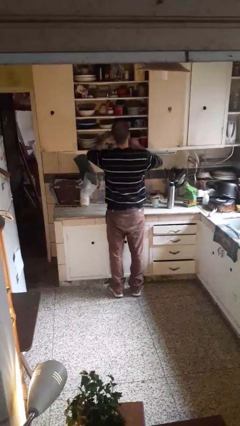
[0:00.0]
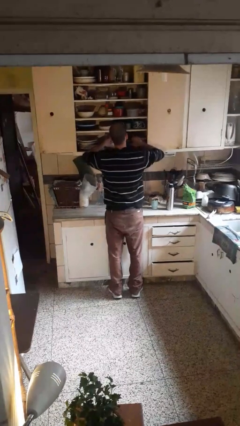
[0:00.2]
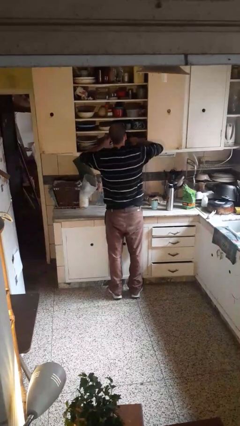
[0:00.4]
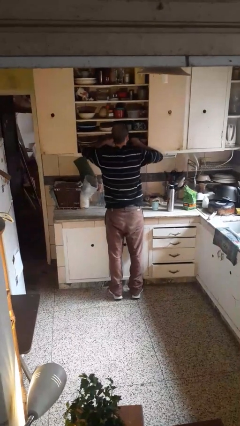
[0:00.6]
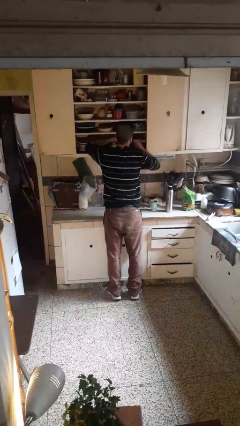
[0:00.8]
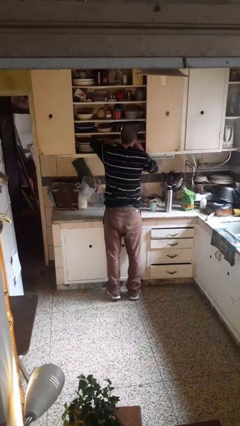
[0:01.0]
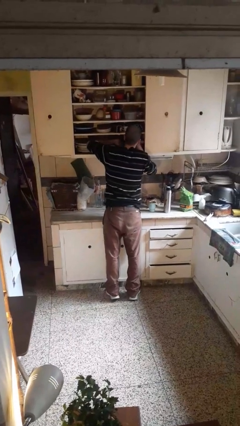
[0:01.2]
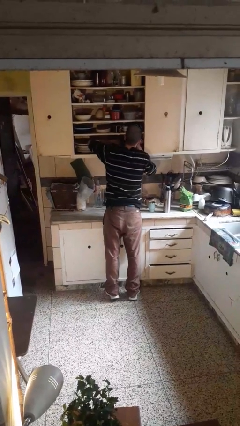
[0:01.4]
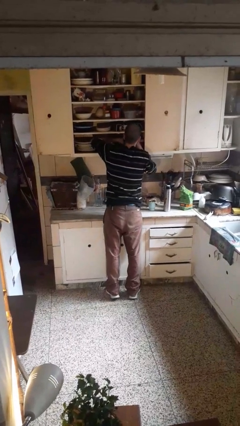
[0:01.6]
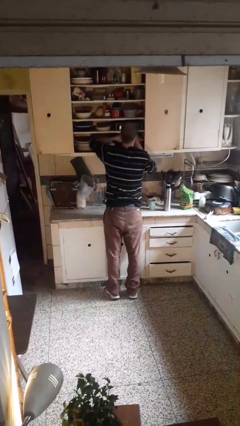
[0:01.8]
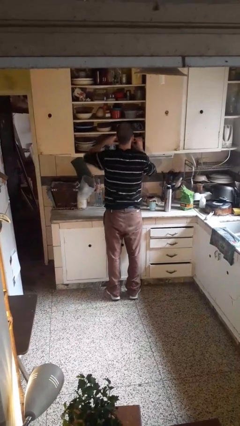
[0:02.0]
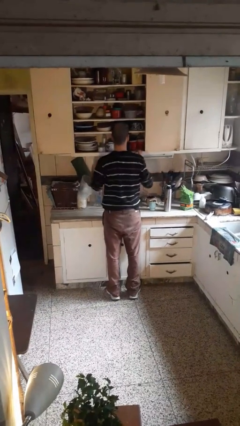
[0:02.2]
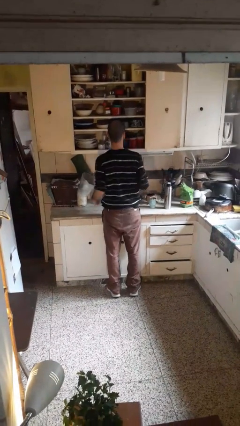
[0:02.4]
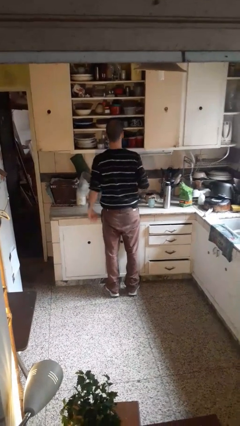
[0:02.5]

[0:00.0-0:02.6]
person searches in cabinet

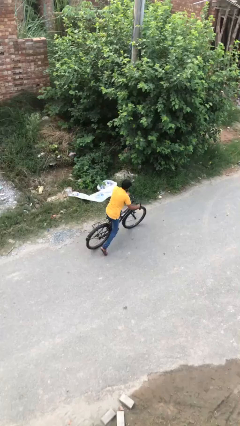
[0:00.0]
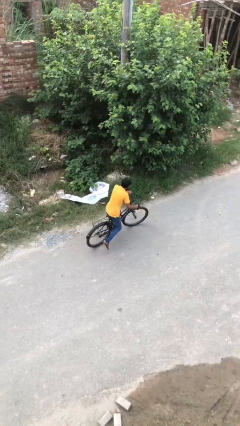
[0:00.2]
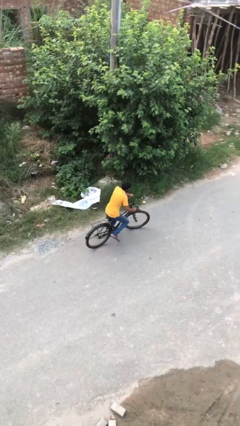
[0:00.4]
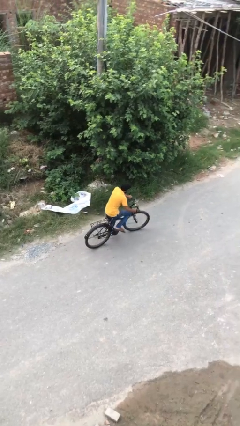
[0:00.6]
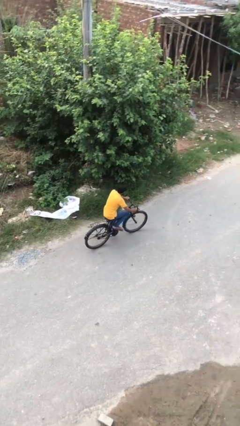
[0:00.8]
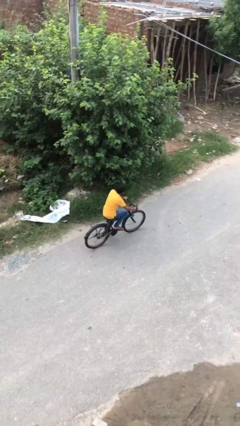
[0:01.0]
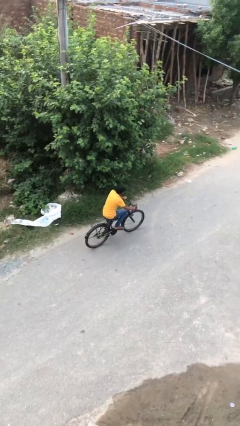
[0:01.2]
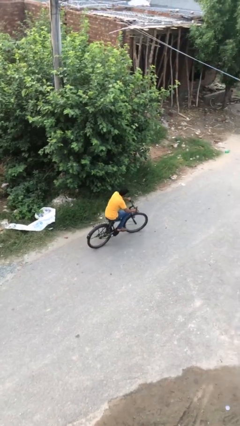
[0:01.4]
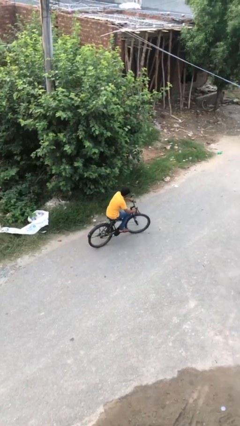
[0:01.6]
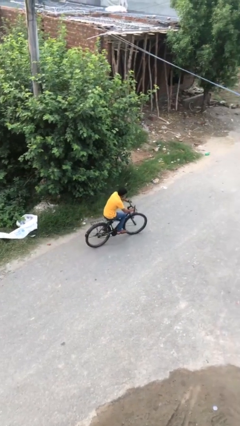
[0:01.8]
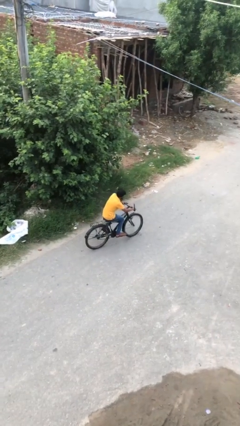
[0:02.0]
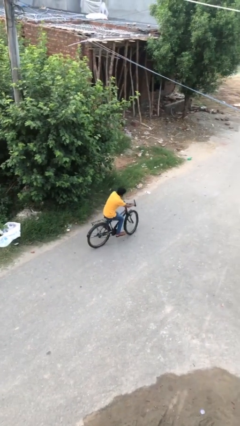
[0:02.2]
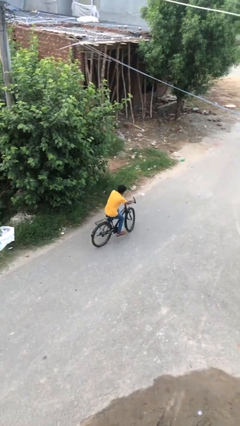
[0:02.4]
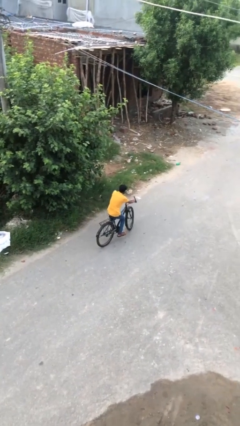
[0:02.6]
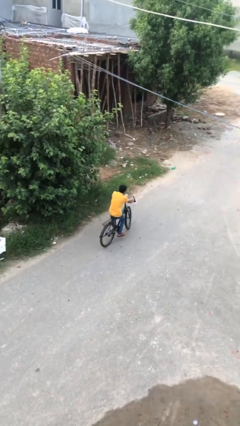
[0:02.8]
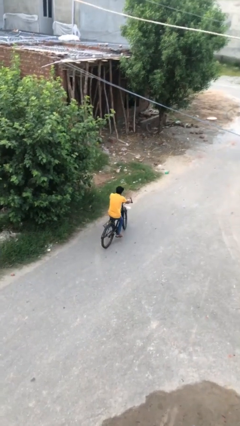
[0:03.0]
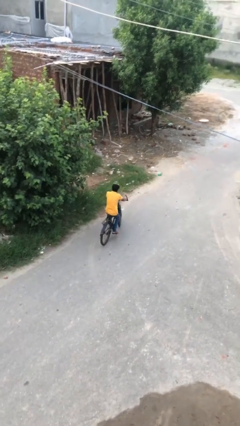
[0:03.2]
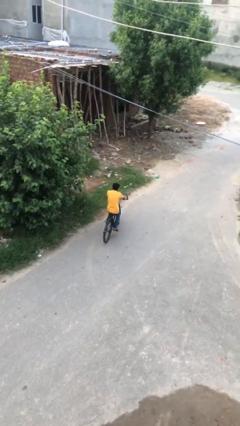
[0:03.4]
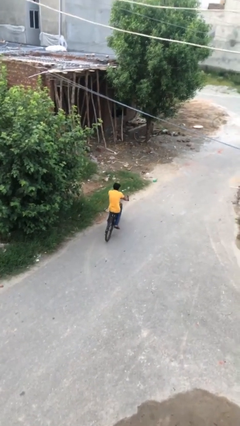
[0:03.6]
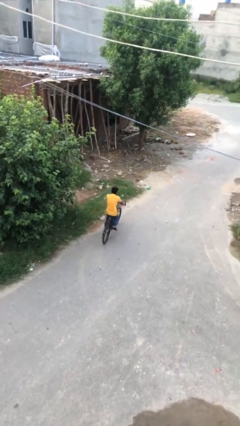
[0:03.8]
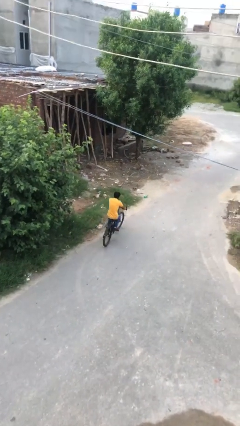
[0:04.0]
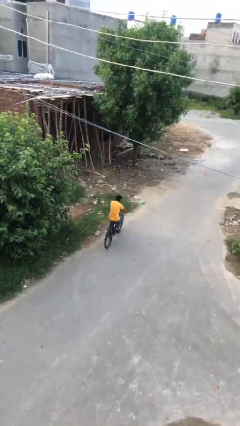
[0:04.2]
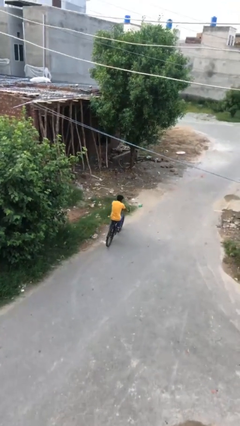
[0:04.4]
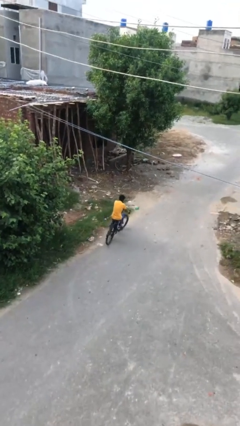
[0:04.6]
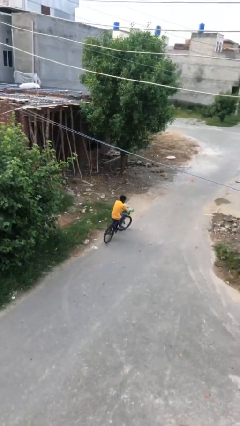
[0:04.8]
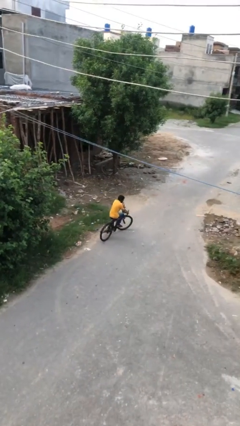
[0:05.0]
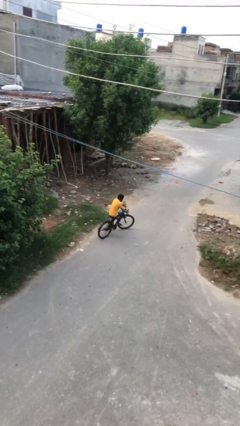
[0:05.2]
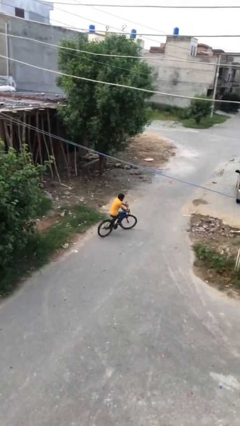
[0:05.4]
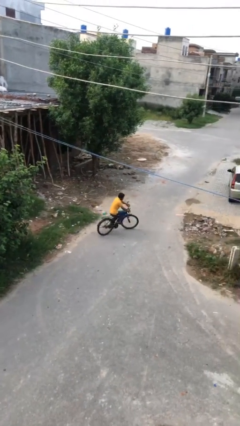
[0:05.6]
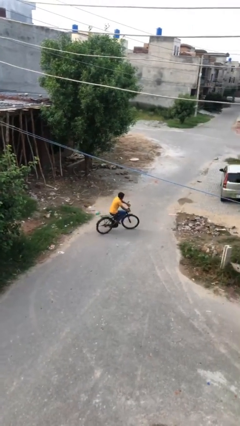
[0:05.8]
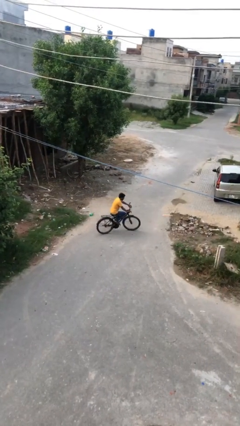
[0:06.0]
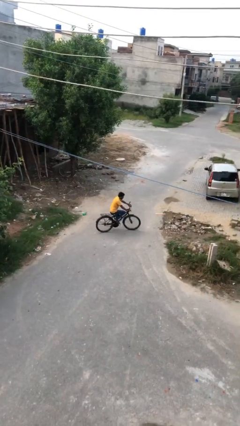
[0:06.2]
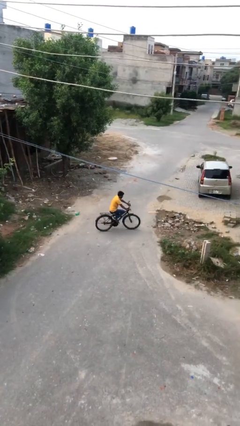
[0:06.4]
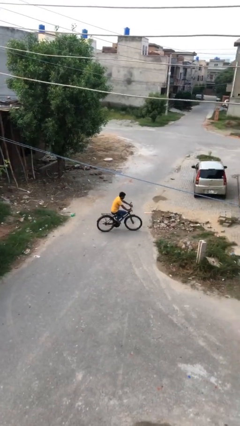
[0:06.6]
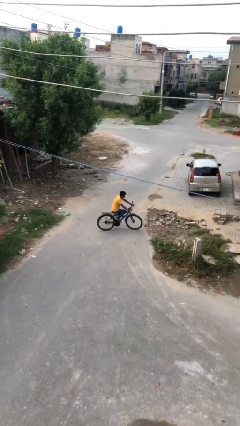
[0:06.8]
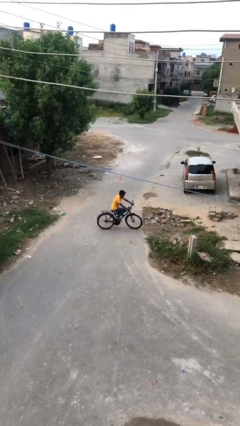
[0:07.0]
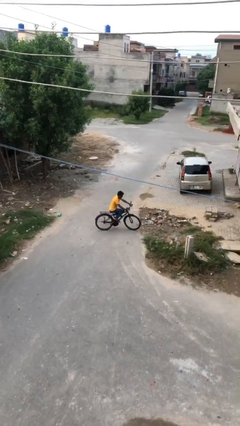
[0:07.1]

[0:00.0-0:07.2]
person rides bicycle

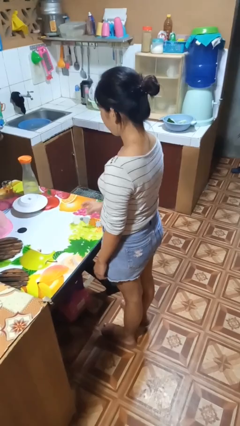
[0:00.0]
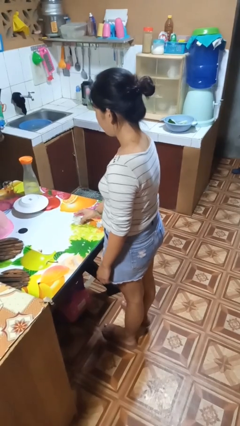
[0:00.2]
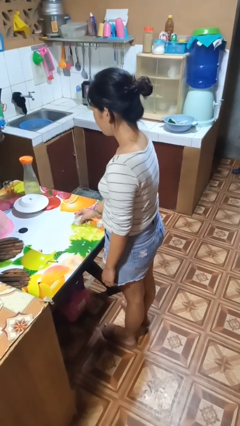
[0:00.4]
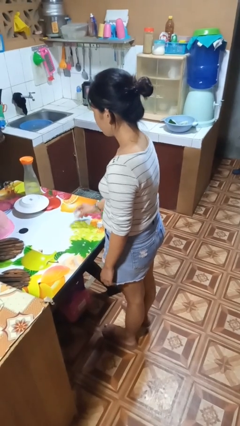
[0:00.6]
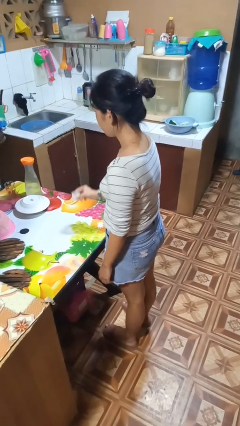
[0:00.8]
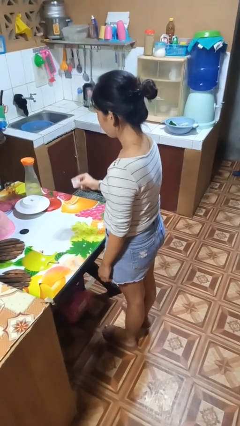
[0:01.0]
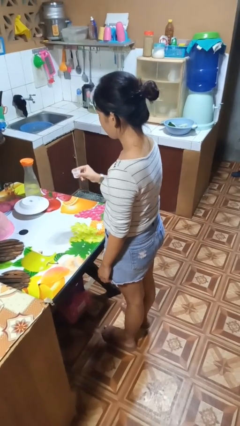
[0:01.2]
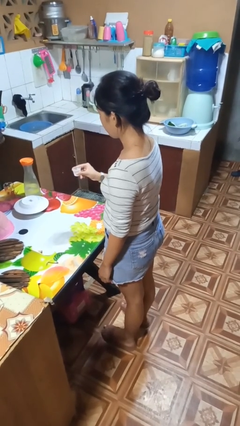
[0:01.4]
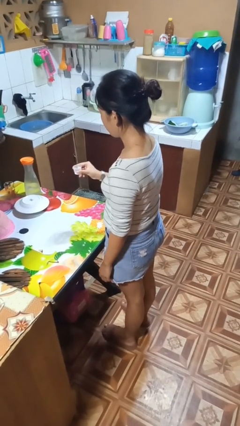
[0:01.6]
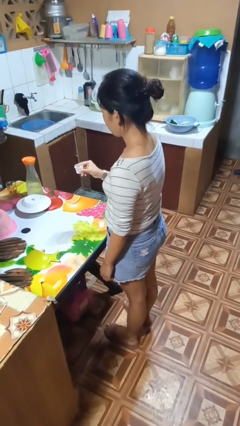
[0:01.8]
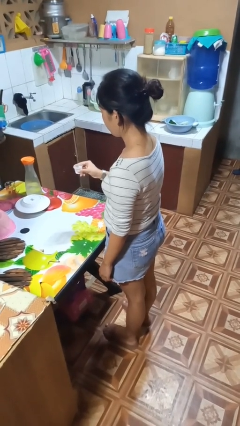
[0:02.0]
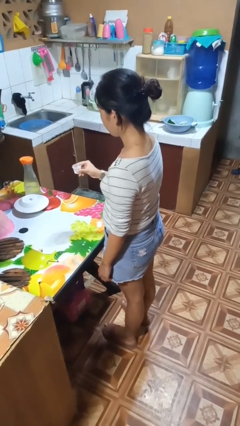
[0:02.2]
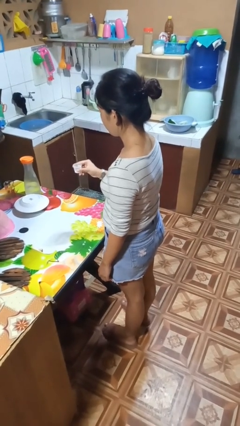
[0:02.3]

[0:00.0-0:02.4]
person picks up object from table

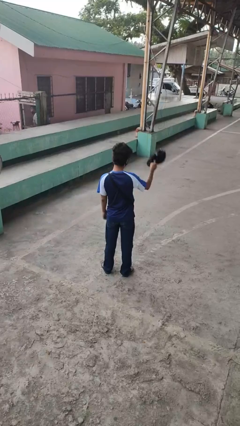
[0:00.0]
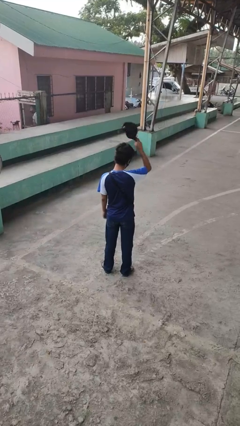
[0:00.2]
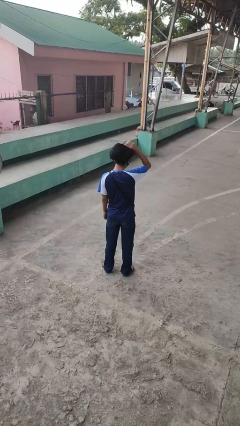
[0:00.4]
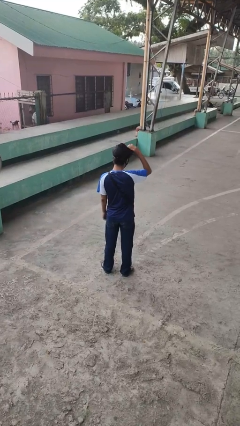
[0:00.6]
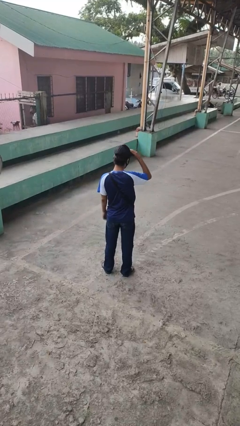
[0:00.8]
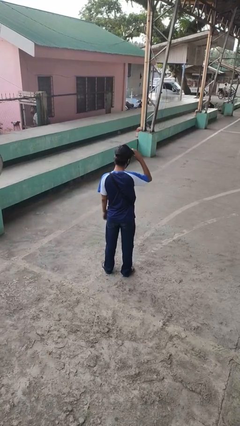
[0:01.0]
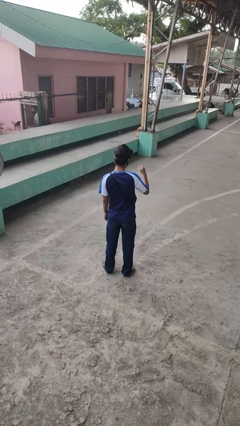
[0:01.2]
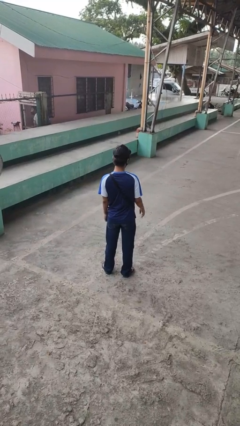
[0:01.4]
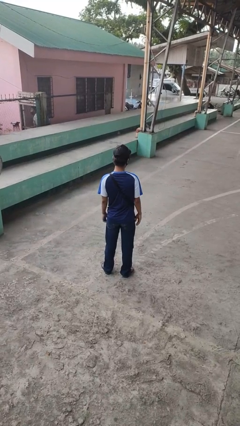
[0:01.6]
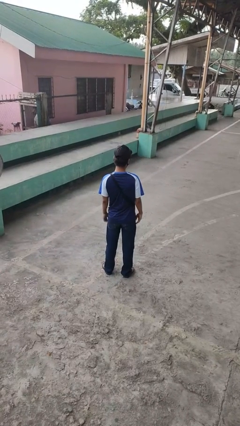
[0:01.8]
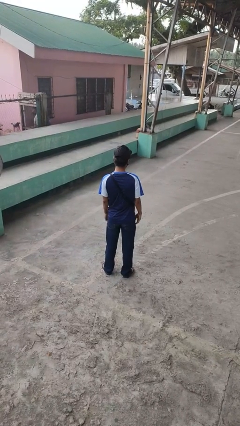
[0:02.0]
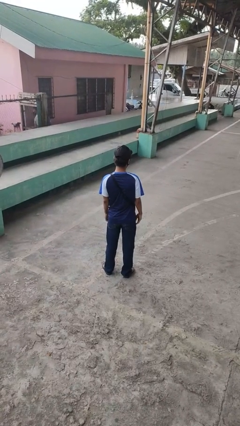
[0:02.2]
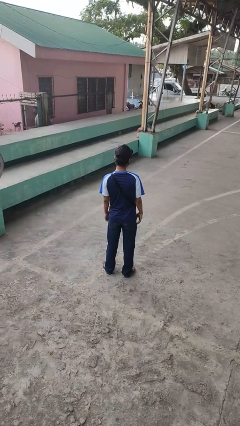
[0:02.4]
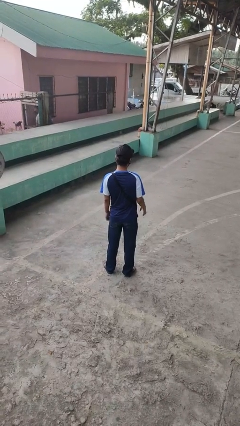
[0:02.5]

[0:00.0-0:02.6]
person puts on hat

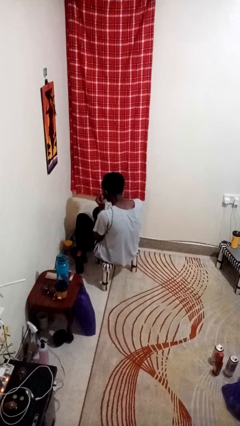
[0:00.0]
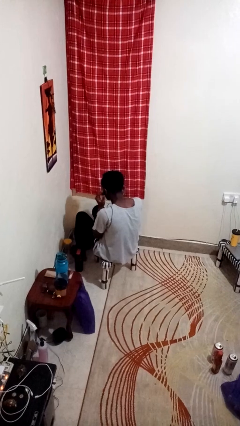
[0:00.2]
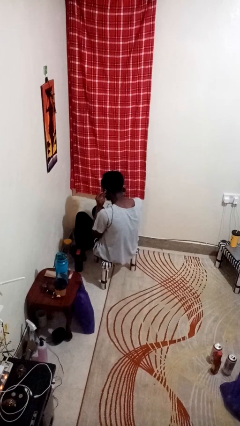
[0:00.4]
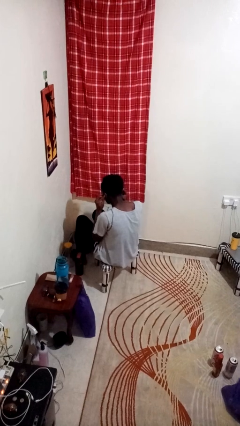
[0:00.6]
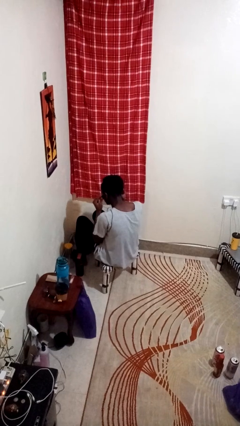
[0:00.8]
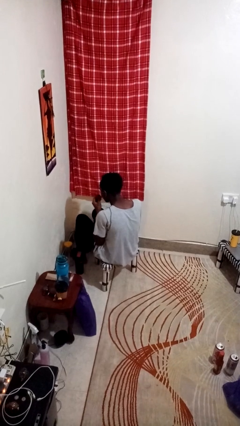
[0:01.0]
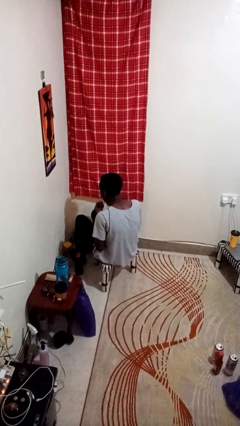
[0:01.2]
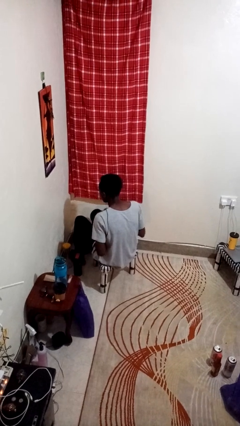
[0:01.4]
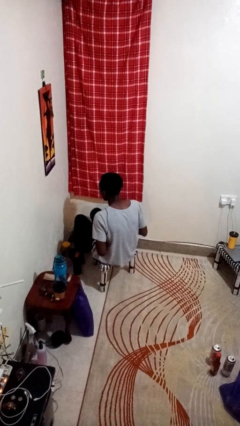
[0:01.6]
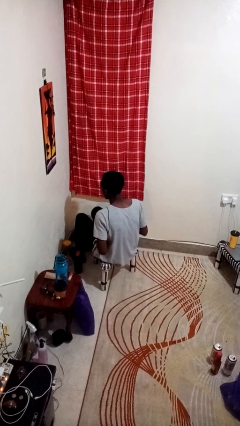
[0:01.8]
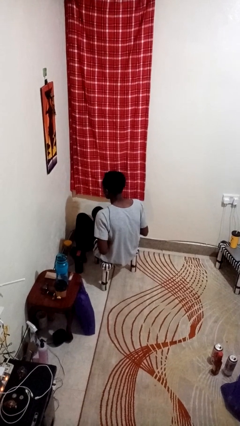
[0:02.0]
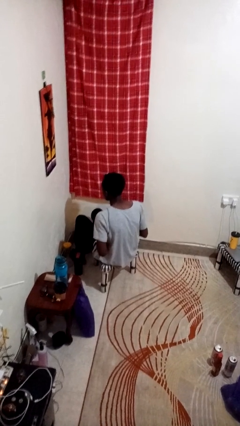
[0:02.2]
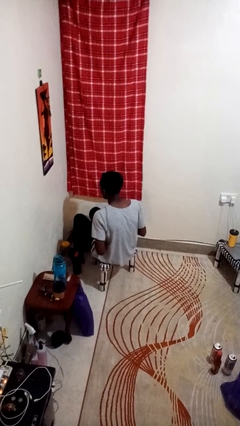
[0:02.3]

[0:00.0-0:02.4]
person takes off headphones

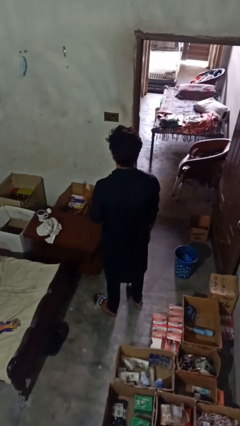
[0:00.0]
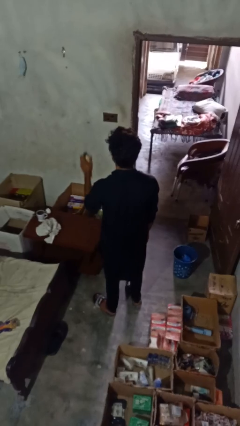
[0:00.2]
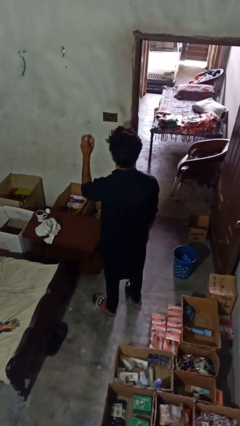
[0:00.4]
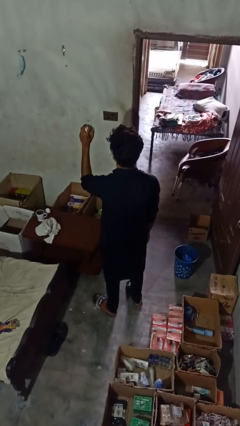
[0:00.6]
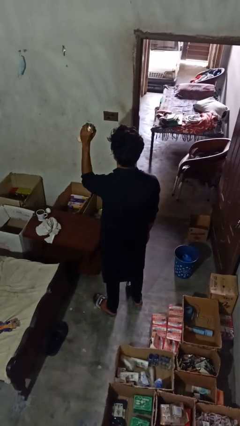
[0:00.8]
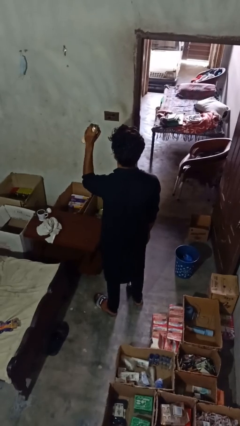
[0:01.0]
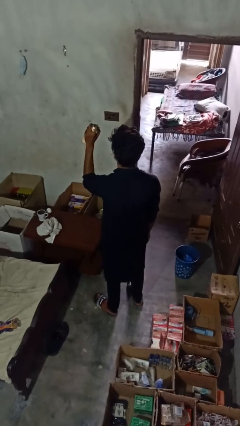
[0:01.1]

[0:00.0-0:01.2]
person sprays from bottle
